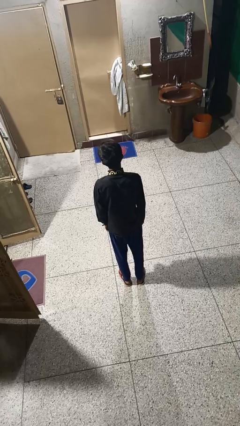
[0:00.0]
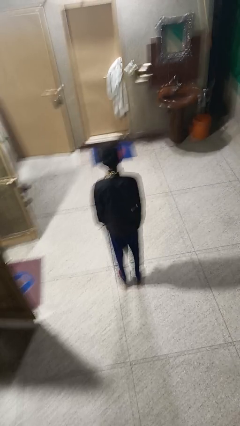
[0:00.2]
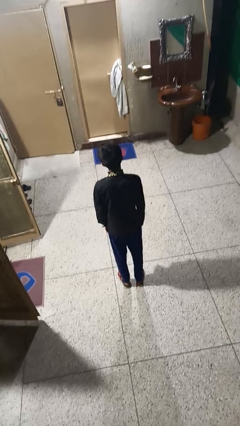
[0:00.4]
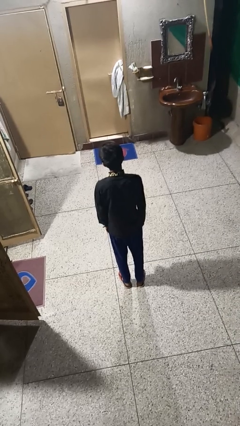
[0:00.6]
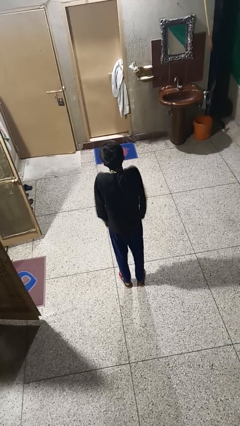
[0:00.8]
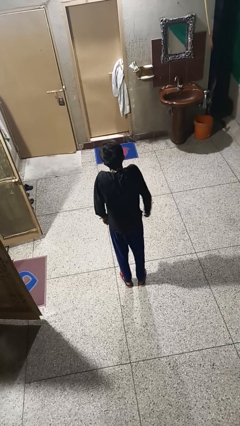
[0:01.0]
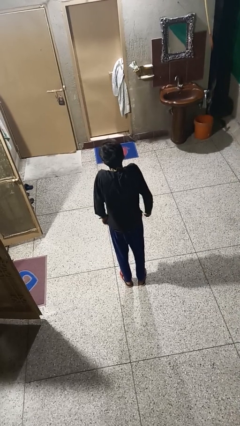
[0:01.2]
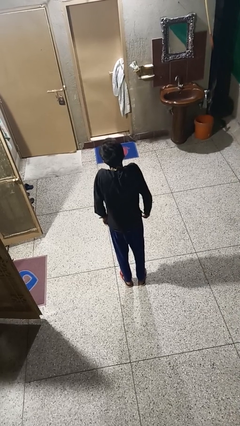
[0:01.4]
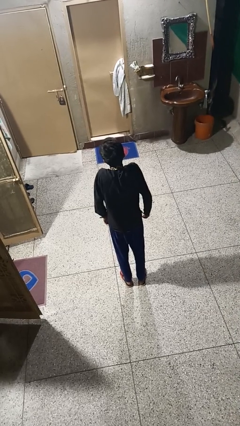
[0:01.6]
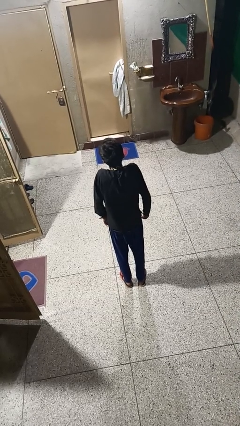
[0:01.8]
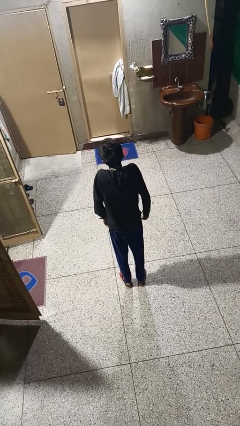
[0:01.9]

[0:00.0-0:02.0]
person shrugs

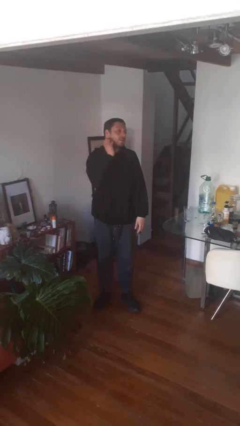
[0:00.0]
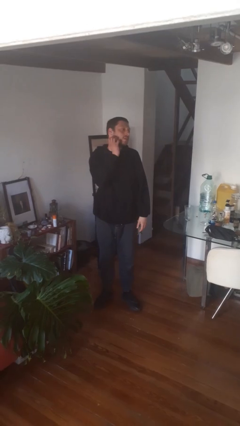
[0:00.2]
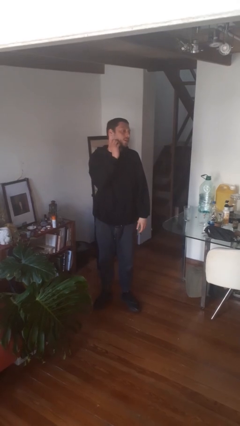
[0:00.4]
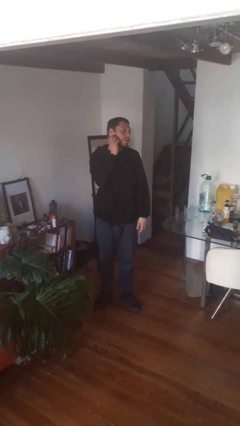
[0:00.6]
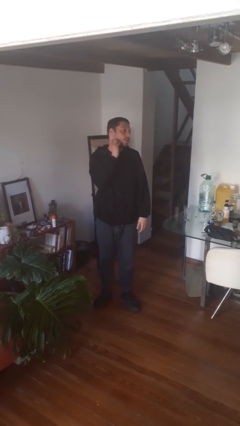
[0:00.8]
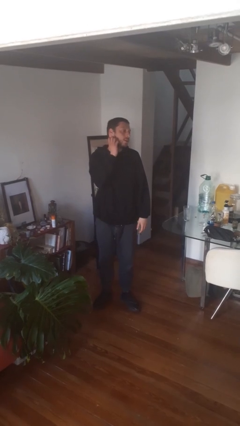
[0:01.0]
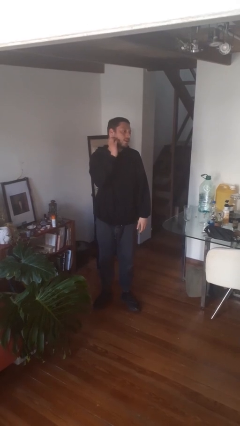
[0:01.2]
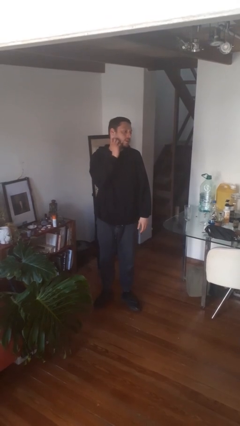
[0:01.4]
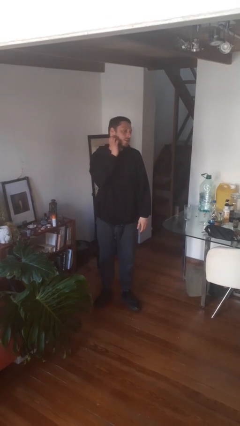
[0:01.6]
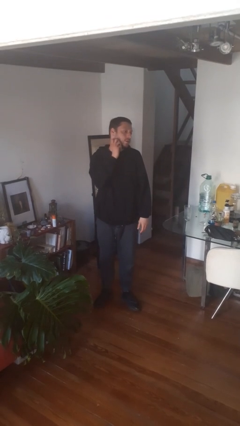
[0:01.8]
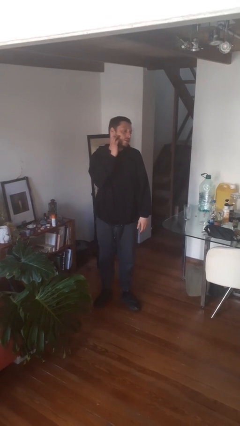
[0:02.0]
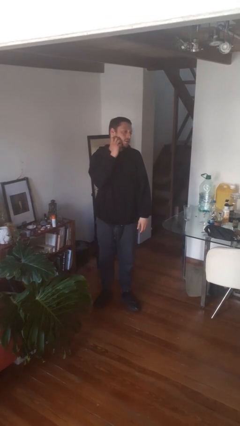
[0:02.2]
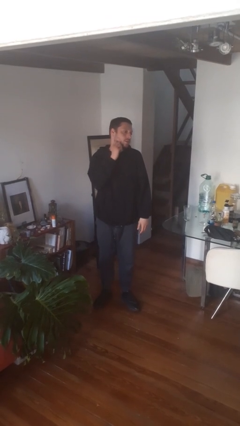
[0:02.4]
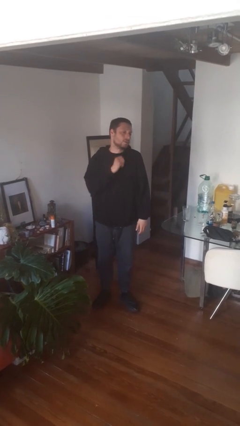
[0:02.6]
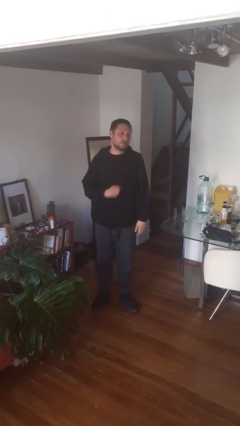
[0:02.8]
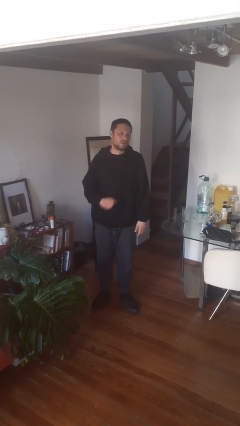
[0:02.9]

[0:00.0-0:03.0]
person scratches face

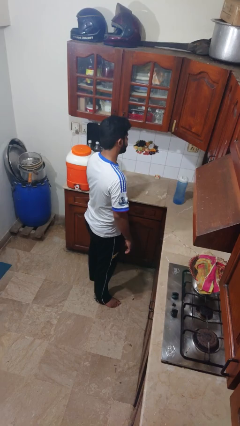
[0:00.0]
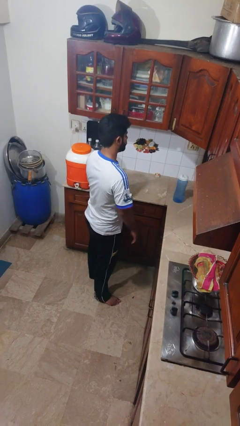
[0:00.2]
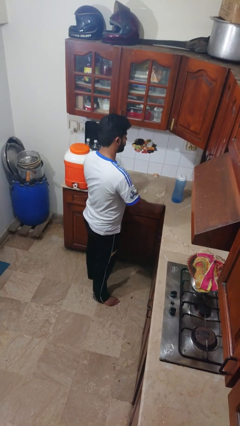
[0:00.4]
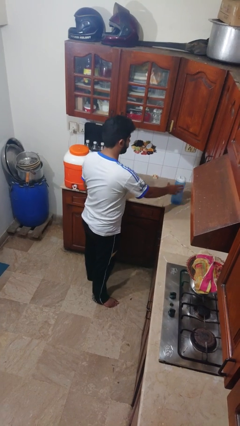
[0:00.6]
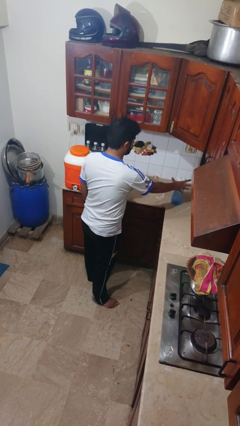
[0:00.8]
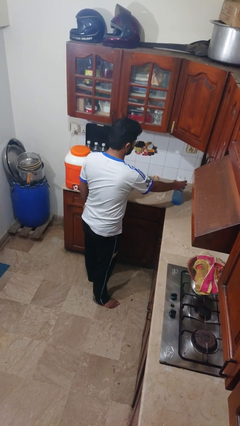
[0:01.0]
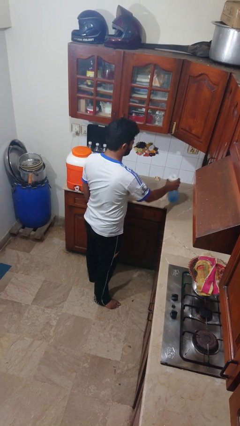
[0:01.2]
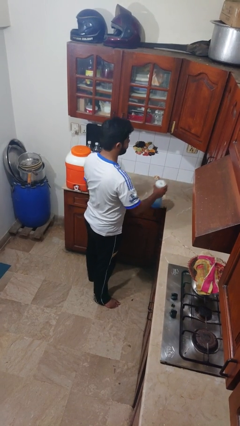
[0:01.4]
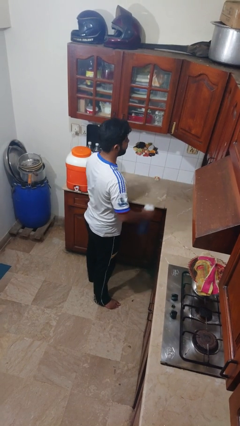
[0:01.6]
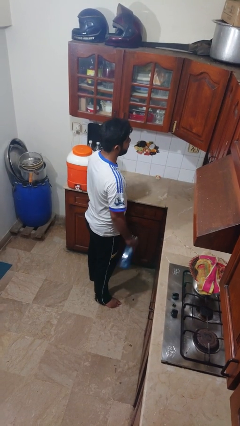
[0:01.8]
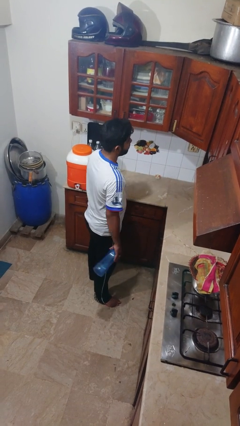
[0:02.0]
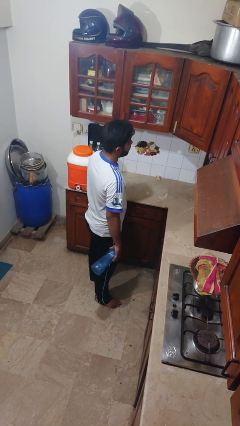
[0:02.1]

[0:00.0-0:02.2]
person picks up object from countertop

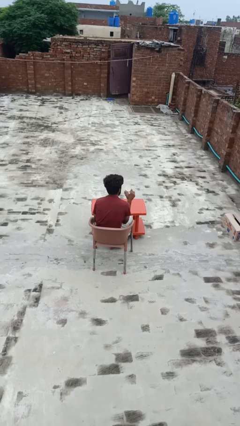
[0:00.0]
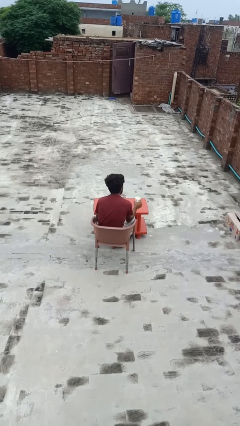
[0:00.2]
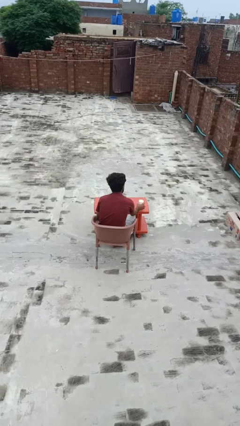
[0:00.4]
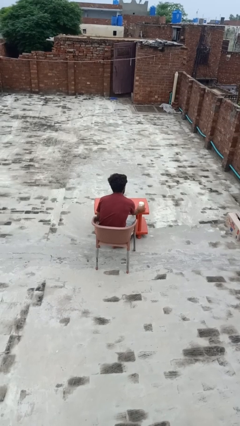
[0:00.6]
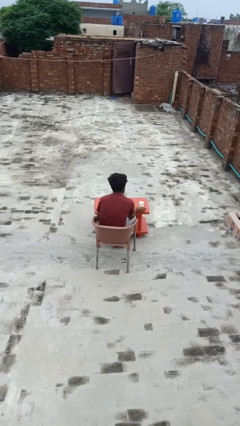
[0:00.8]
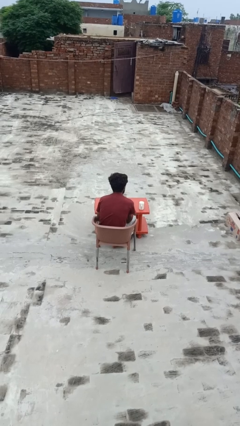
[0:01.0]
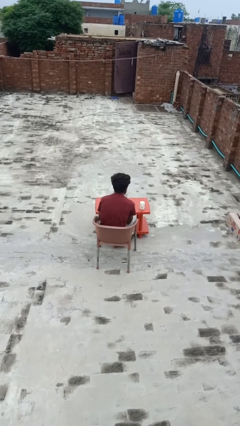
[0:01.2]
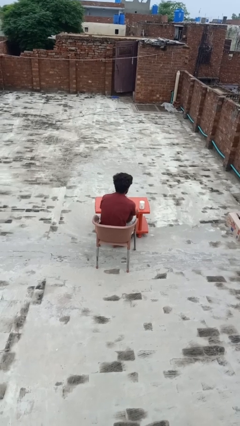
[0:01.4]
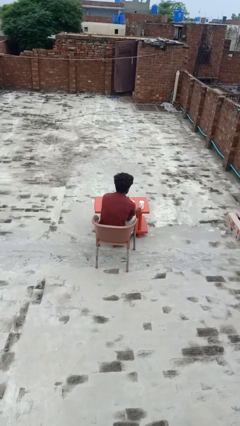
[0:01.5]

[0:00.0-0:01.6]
person drinks from mug

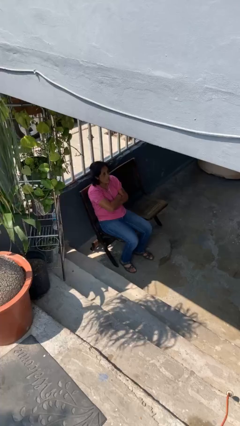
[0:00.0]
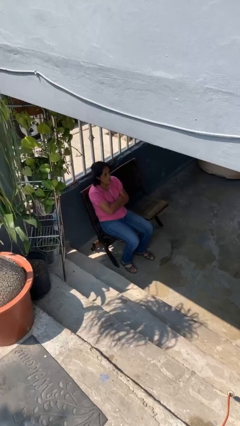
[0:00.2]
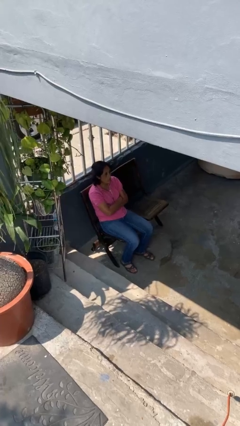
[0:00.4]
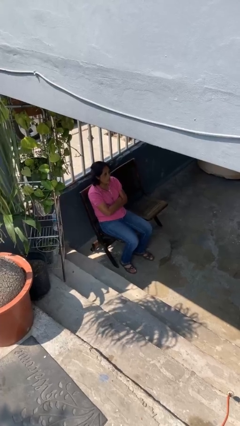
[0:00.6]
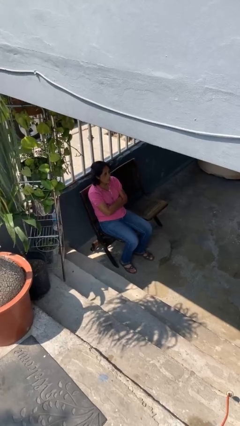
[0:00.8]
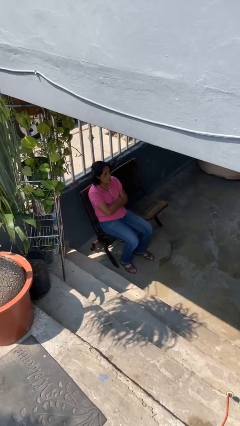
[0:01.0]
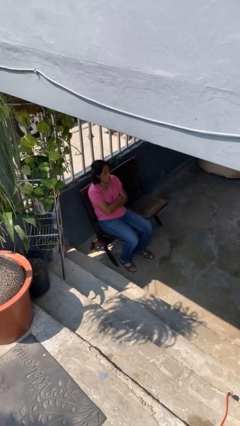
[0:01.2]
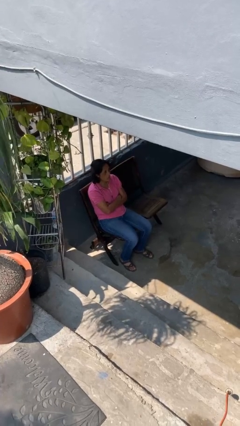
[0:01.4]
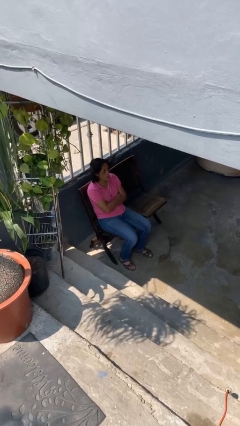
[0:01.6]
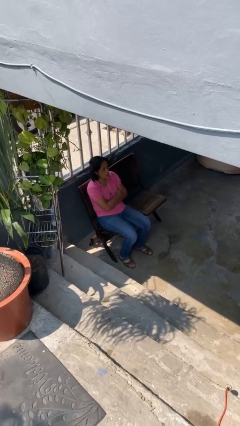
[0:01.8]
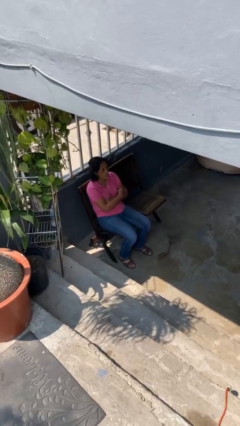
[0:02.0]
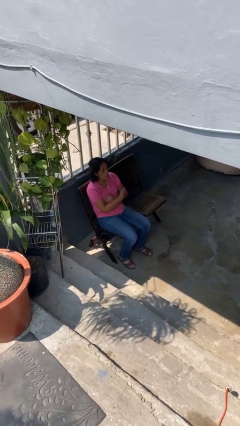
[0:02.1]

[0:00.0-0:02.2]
person crosses arms

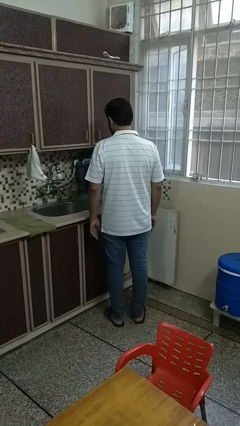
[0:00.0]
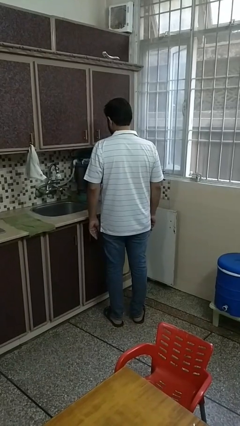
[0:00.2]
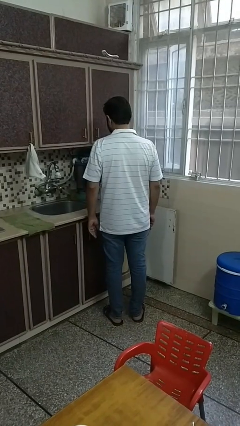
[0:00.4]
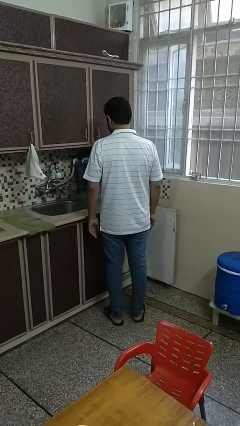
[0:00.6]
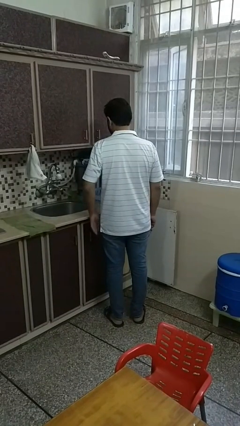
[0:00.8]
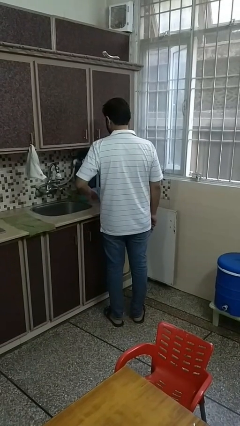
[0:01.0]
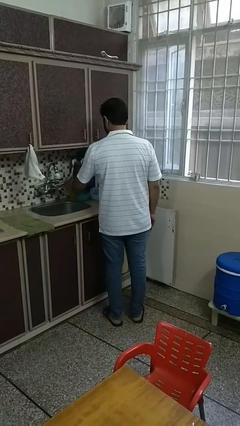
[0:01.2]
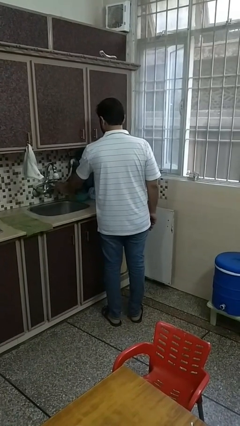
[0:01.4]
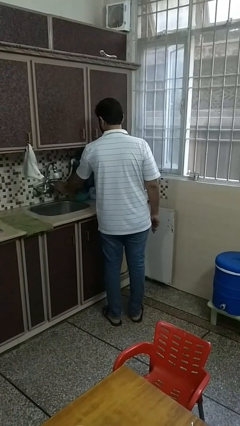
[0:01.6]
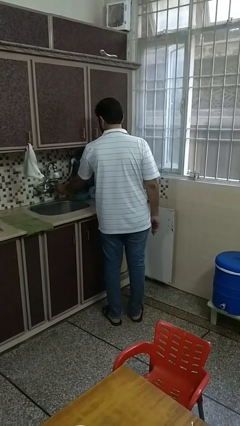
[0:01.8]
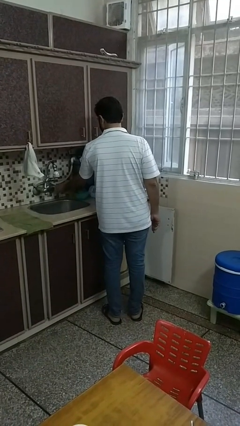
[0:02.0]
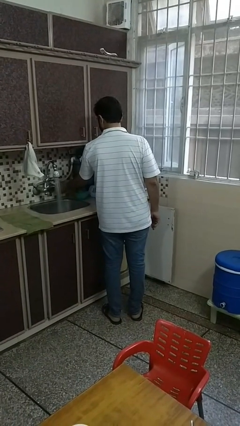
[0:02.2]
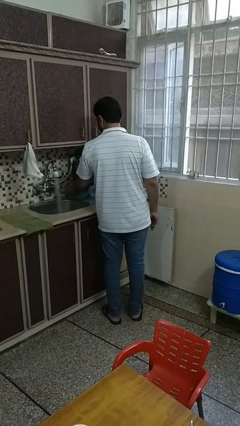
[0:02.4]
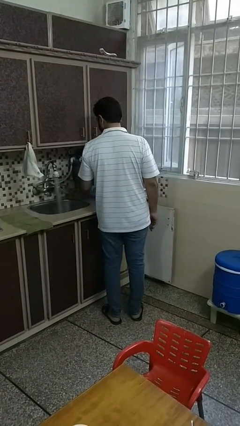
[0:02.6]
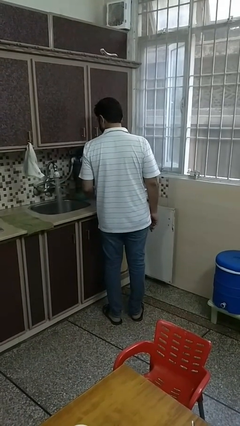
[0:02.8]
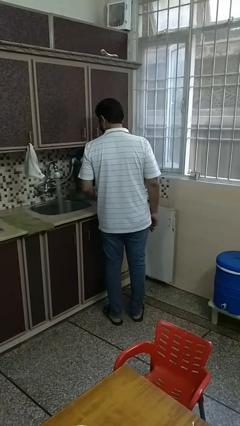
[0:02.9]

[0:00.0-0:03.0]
person turns on faucet

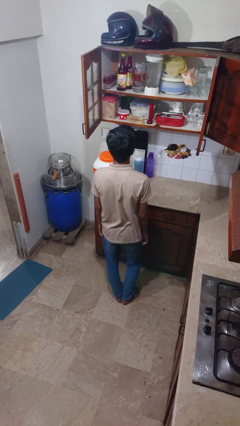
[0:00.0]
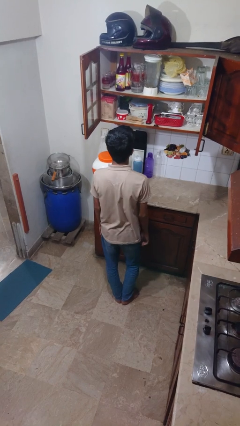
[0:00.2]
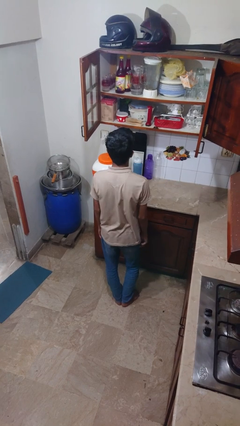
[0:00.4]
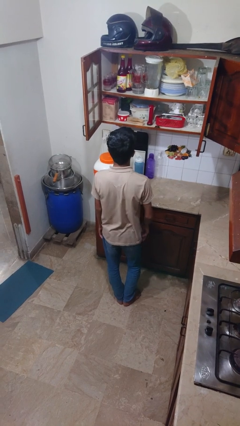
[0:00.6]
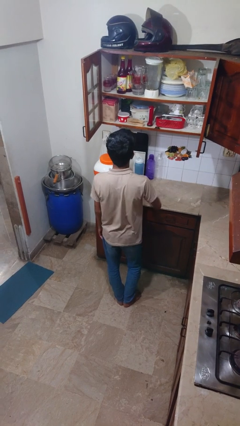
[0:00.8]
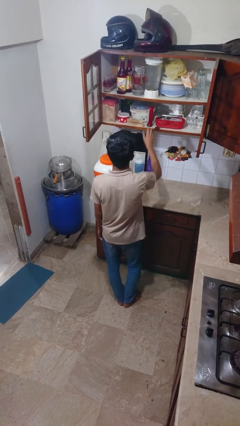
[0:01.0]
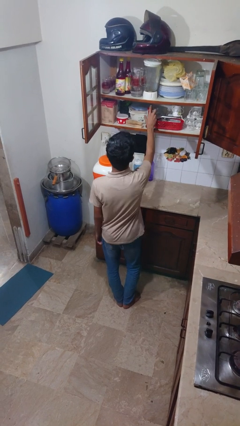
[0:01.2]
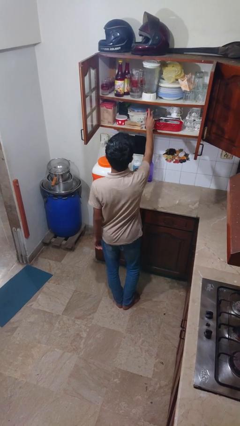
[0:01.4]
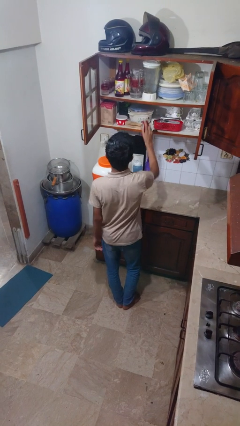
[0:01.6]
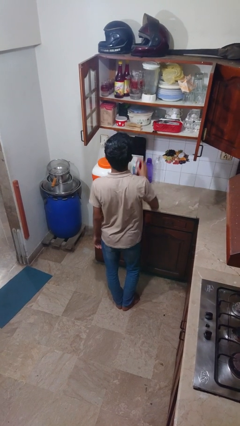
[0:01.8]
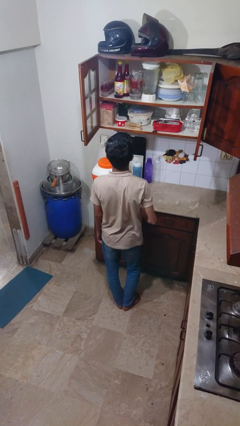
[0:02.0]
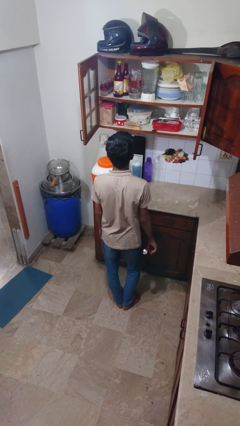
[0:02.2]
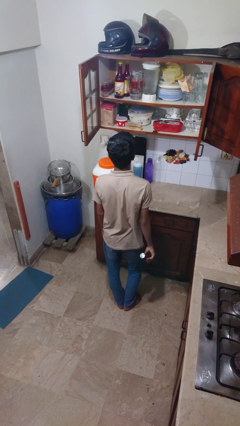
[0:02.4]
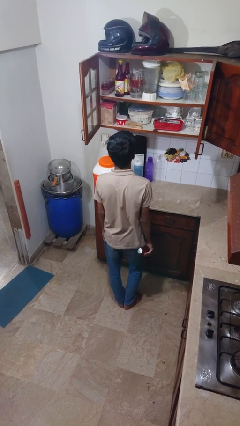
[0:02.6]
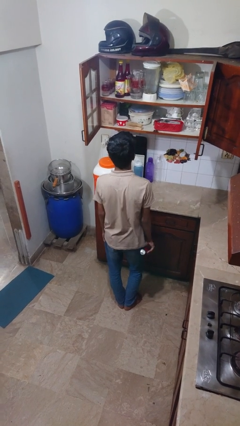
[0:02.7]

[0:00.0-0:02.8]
person picks up object from cabinet

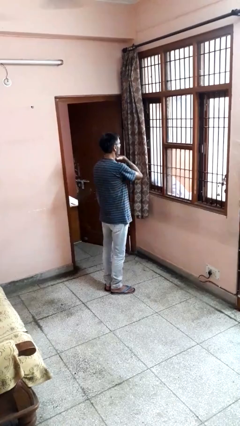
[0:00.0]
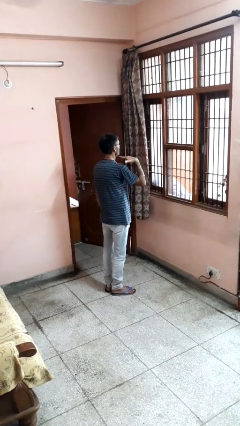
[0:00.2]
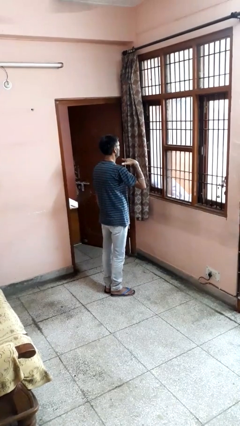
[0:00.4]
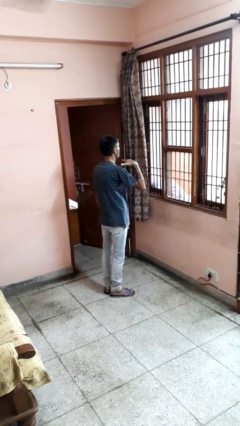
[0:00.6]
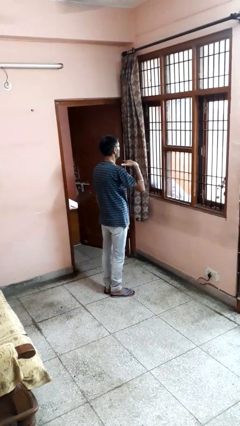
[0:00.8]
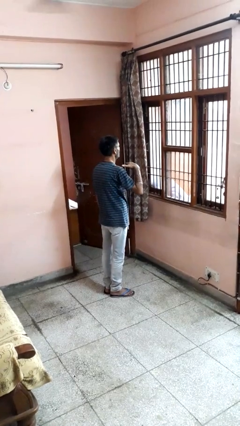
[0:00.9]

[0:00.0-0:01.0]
person gestures cut
